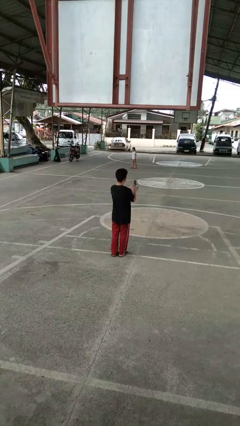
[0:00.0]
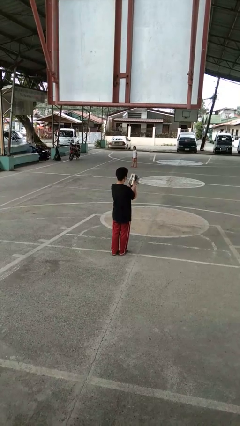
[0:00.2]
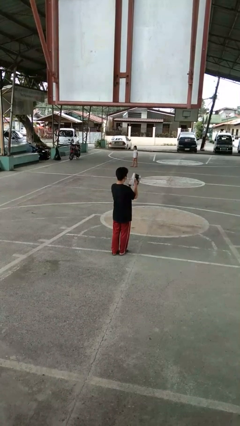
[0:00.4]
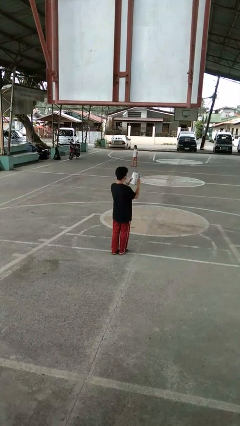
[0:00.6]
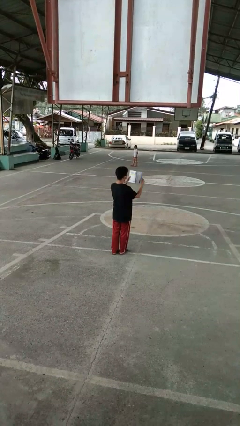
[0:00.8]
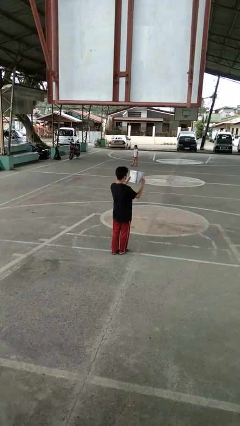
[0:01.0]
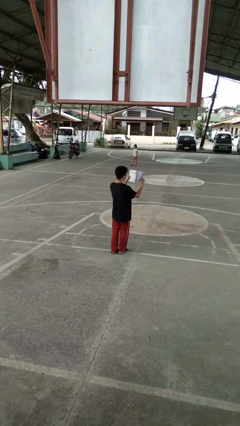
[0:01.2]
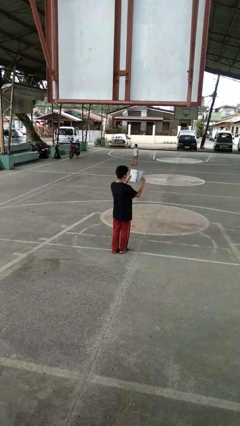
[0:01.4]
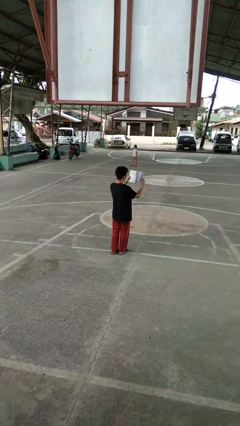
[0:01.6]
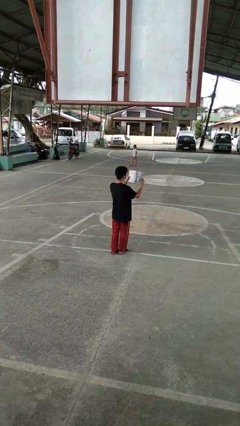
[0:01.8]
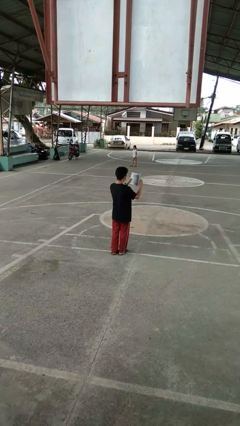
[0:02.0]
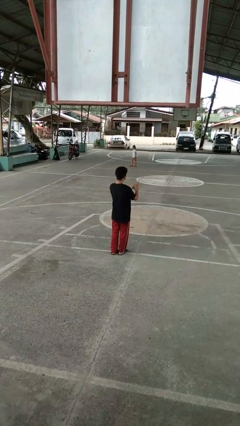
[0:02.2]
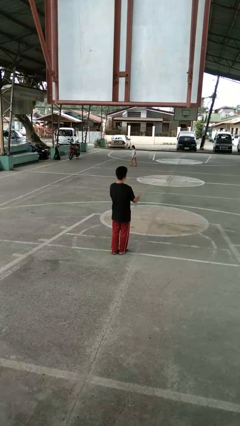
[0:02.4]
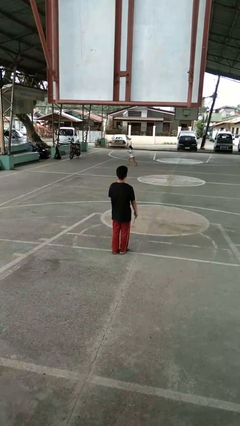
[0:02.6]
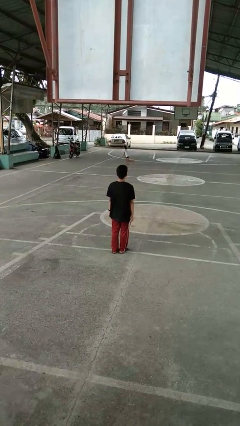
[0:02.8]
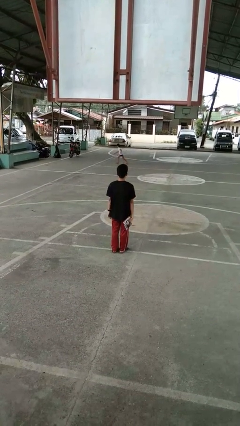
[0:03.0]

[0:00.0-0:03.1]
person reads magazine

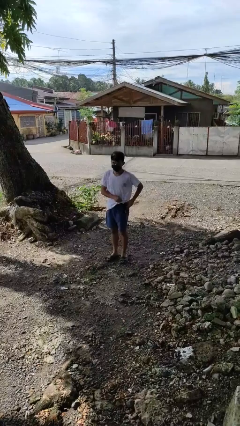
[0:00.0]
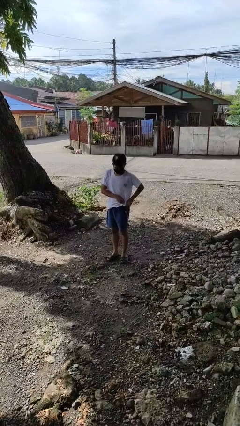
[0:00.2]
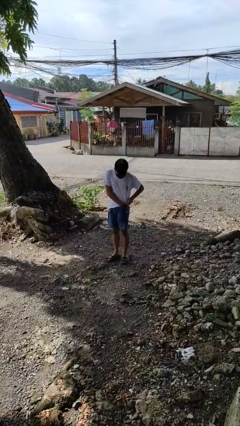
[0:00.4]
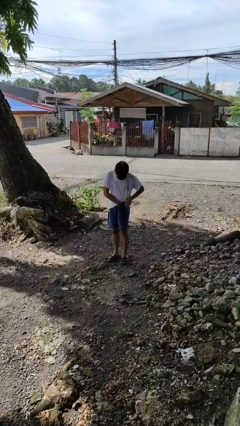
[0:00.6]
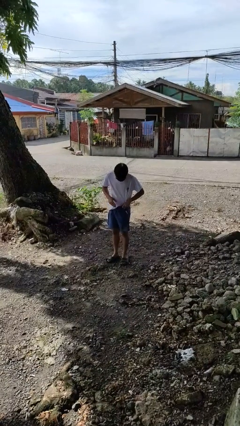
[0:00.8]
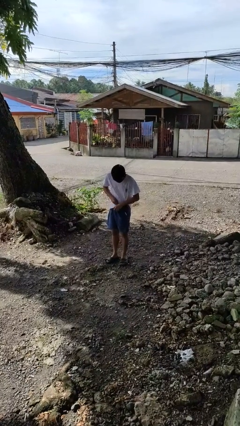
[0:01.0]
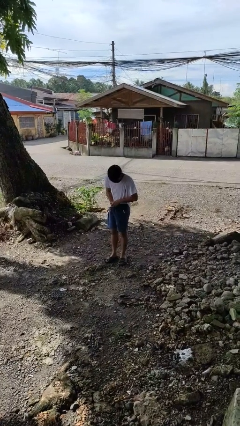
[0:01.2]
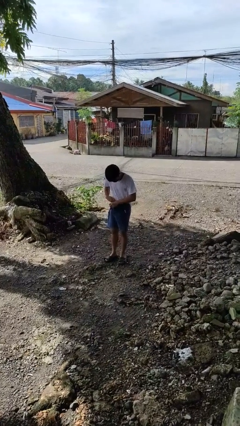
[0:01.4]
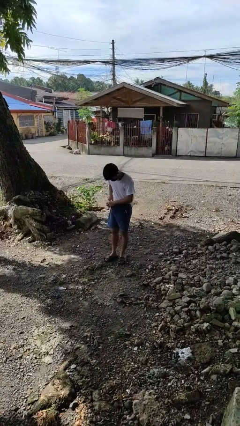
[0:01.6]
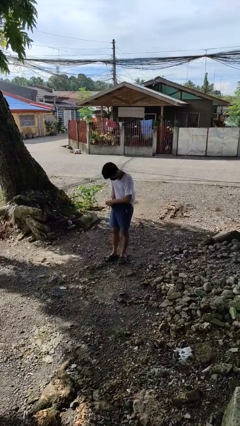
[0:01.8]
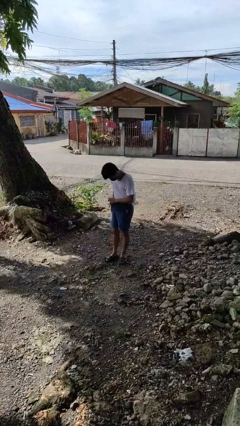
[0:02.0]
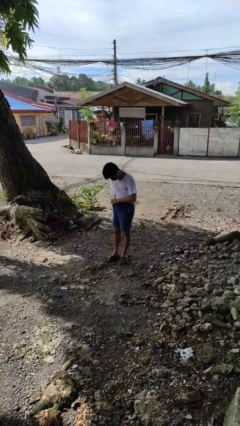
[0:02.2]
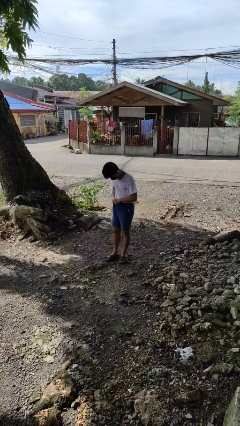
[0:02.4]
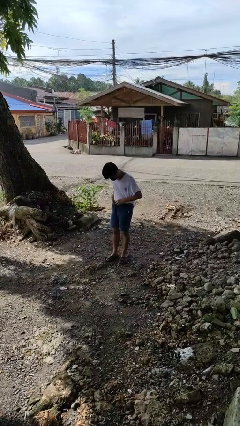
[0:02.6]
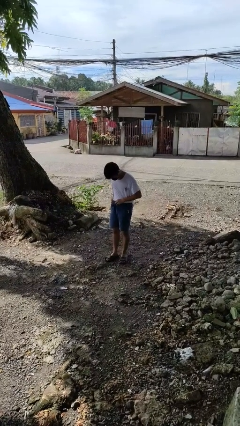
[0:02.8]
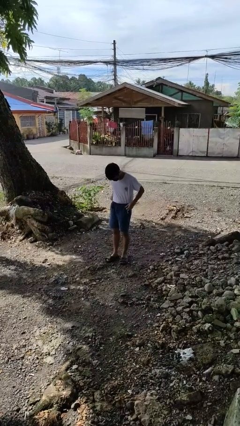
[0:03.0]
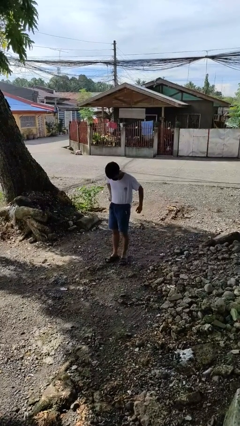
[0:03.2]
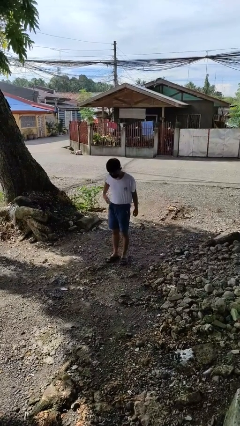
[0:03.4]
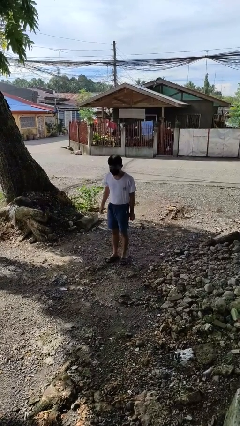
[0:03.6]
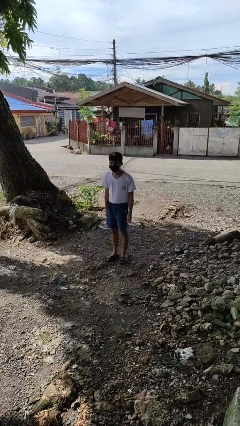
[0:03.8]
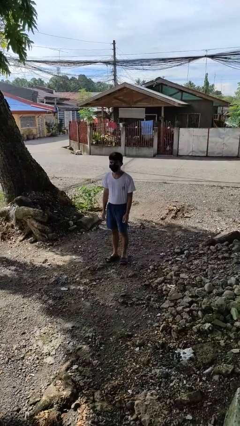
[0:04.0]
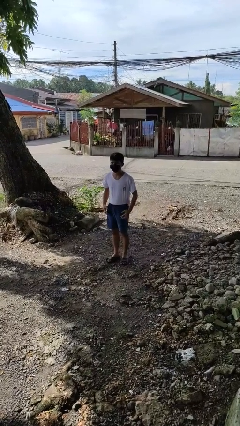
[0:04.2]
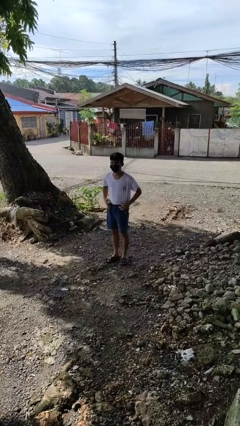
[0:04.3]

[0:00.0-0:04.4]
person tucks in shirt

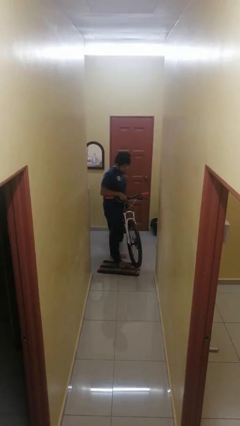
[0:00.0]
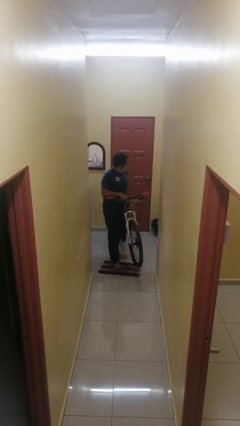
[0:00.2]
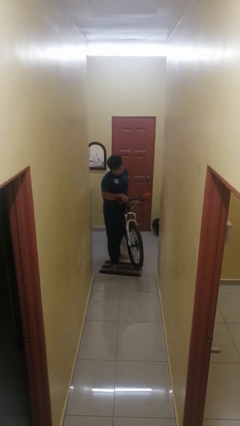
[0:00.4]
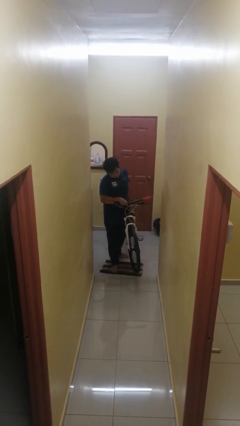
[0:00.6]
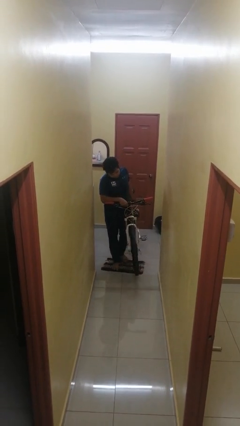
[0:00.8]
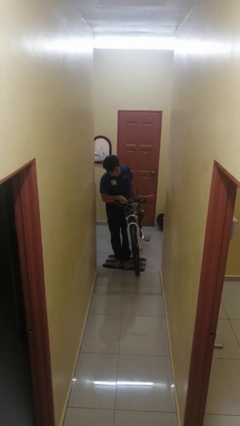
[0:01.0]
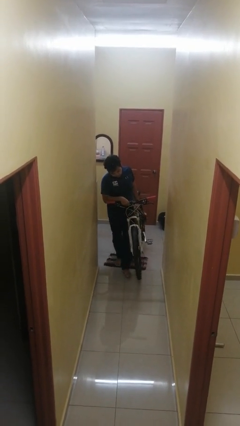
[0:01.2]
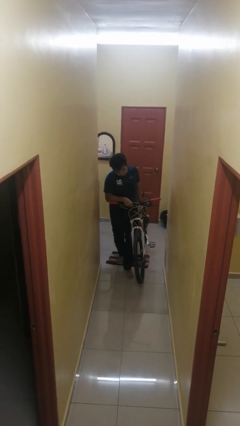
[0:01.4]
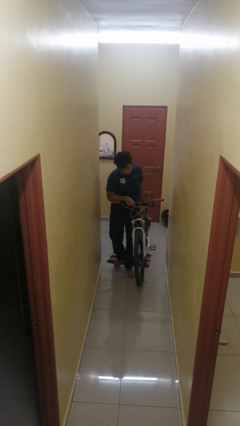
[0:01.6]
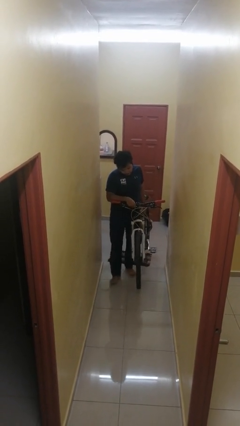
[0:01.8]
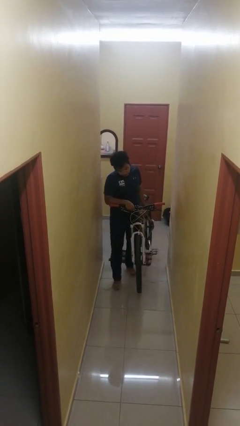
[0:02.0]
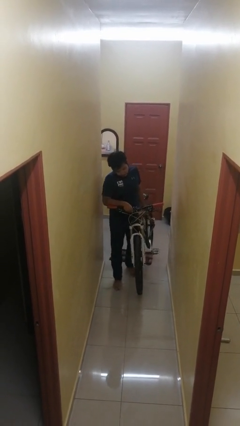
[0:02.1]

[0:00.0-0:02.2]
person carries bicycle

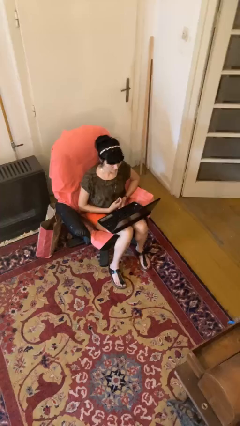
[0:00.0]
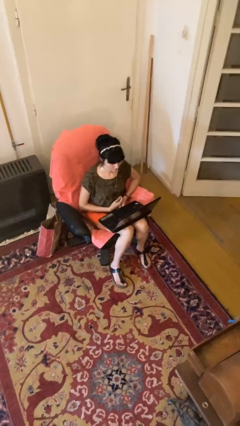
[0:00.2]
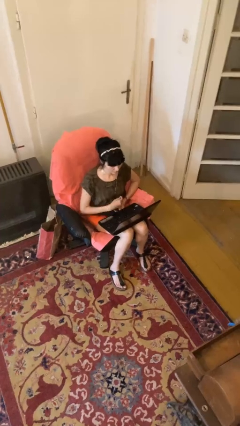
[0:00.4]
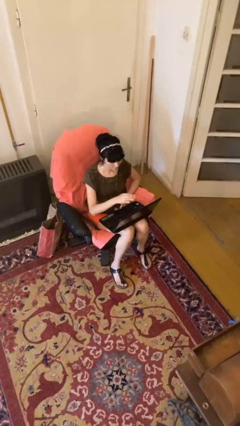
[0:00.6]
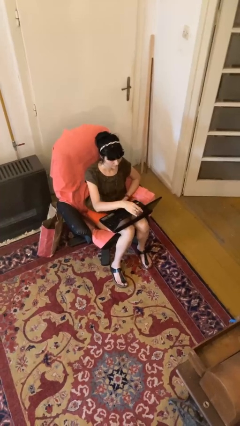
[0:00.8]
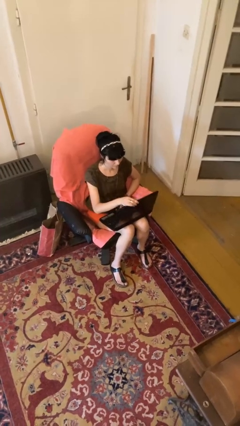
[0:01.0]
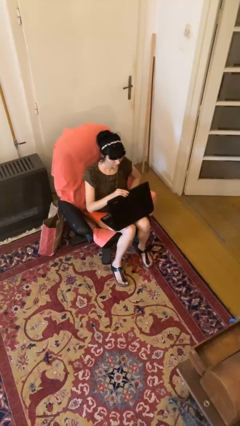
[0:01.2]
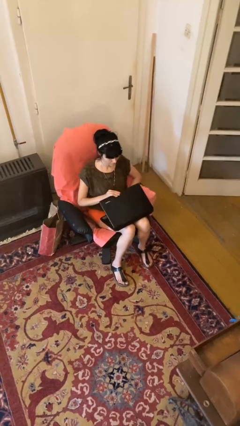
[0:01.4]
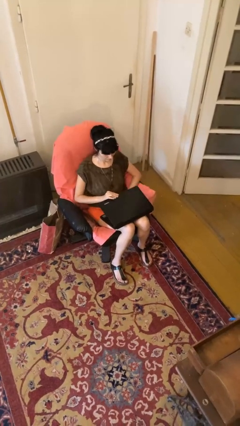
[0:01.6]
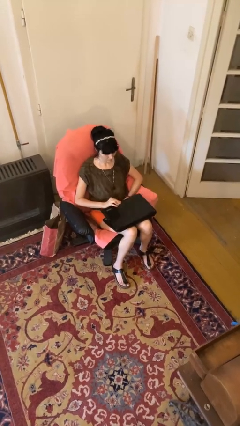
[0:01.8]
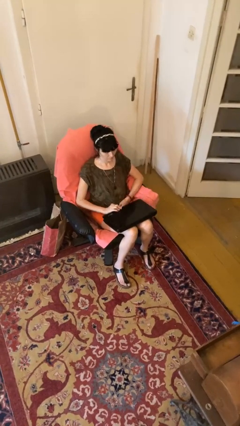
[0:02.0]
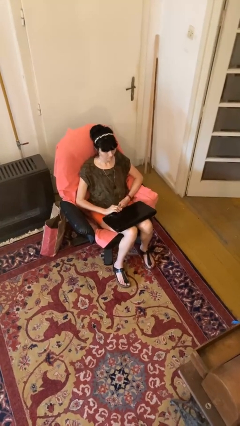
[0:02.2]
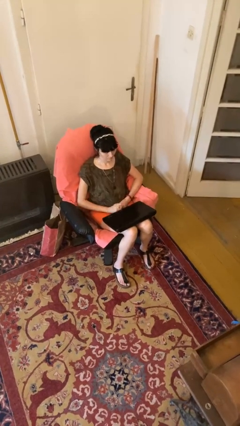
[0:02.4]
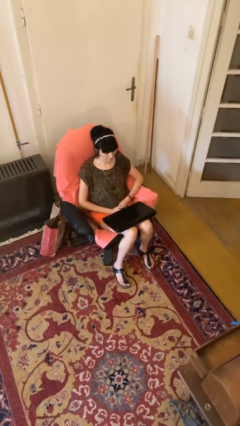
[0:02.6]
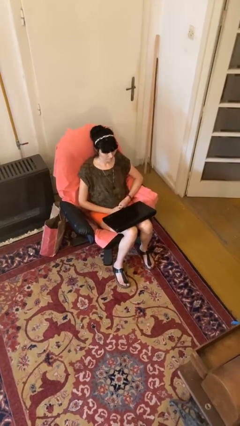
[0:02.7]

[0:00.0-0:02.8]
person closes laptop

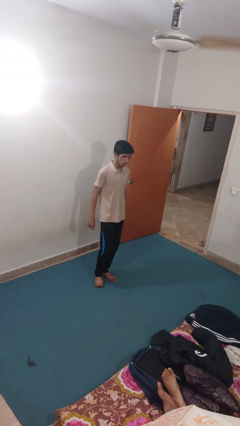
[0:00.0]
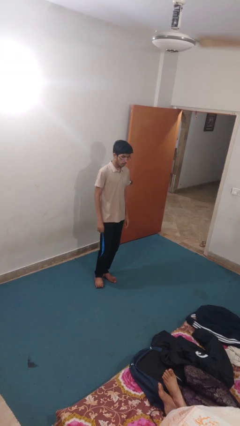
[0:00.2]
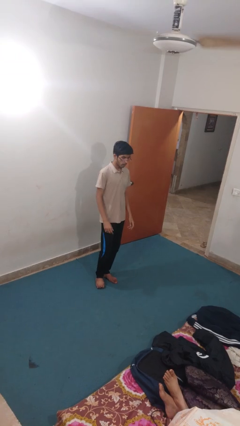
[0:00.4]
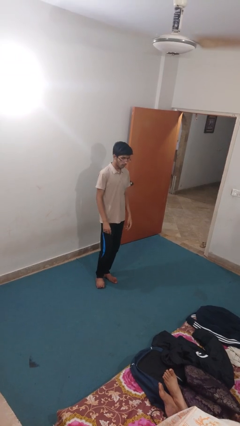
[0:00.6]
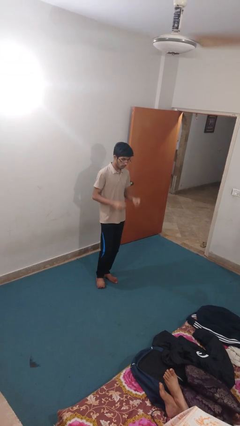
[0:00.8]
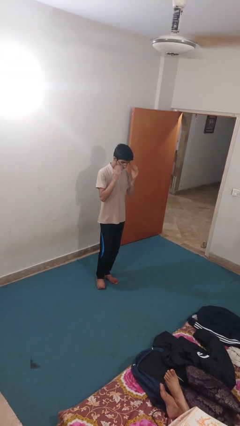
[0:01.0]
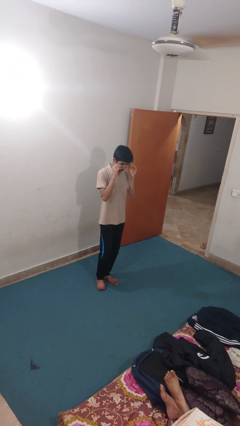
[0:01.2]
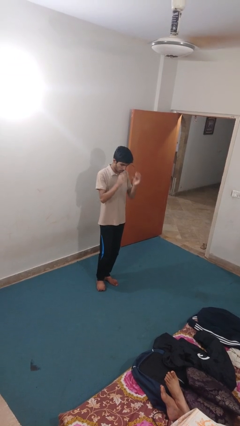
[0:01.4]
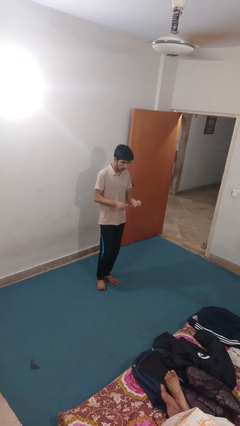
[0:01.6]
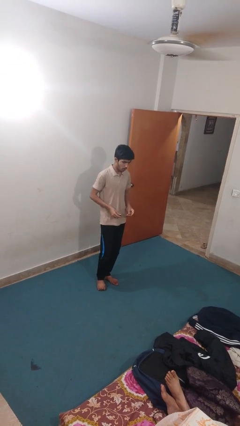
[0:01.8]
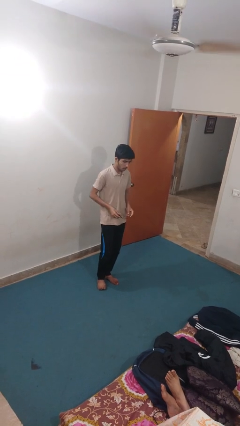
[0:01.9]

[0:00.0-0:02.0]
person takes off glasses

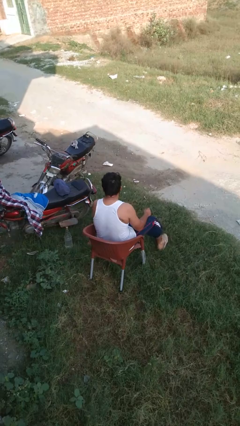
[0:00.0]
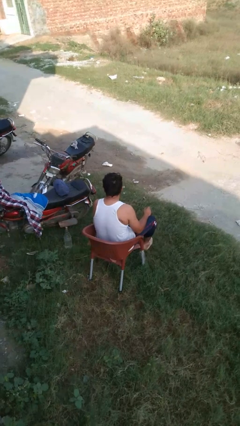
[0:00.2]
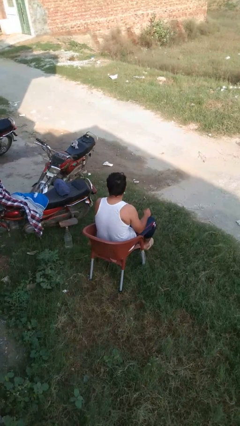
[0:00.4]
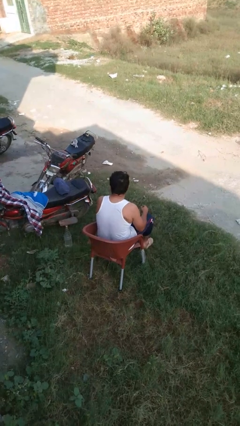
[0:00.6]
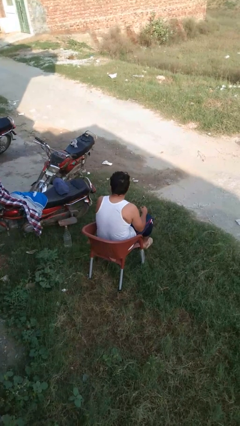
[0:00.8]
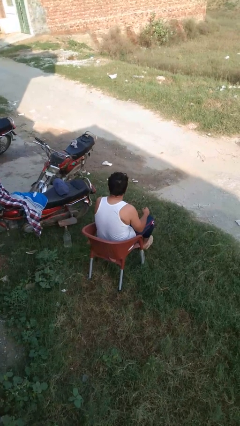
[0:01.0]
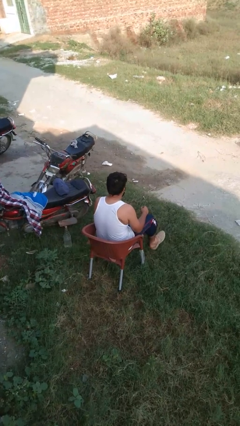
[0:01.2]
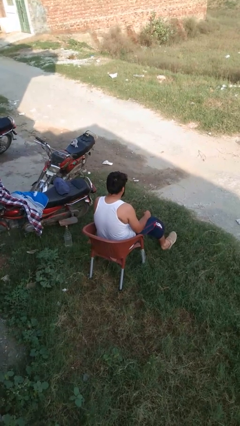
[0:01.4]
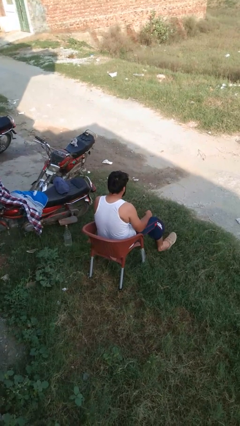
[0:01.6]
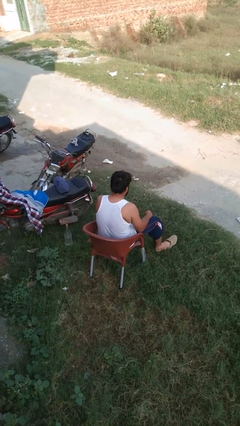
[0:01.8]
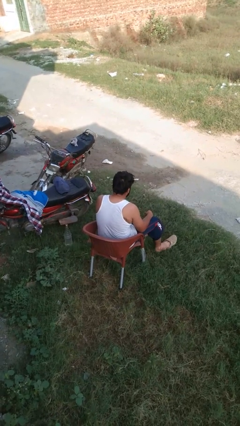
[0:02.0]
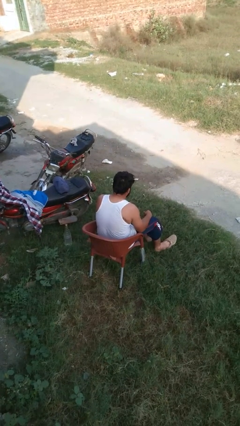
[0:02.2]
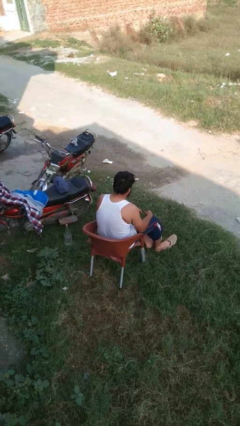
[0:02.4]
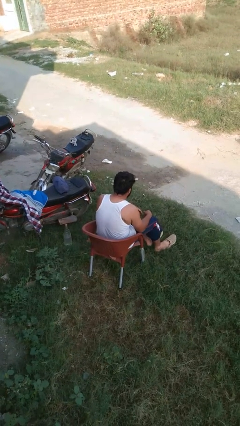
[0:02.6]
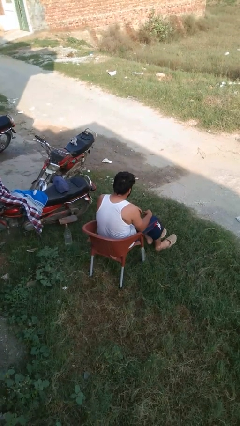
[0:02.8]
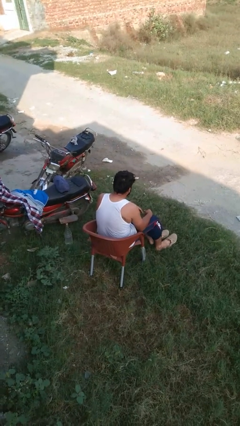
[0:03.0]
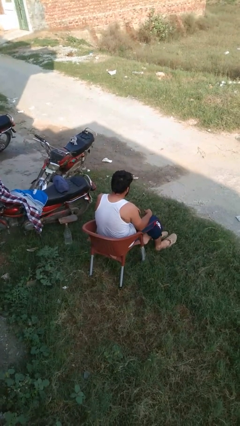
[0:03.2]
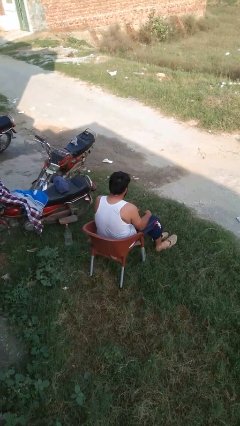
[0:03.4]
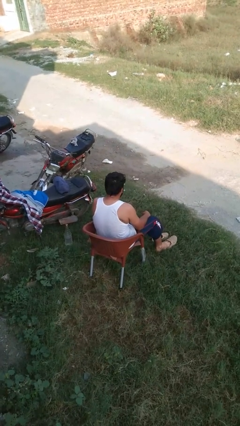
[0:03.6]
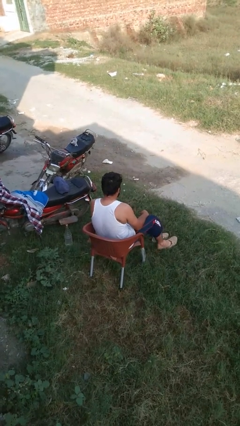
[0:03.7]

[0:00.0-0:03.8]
person takes off shoes
